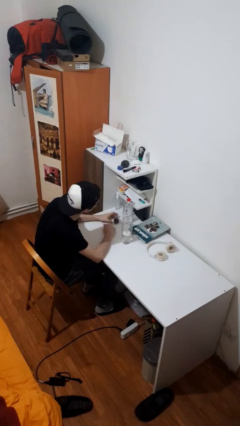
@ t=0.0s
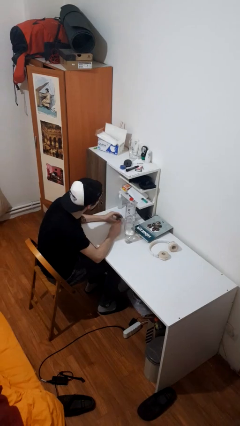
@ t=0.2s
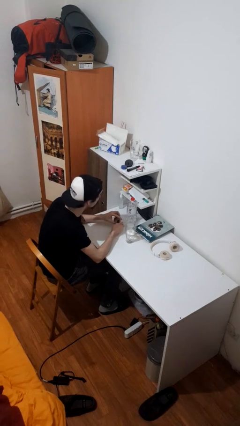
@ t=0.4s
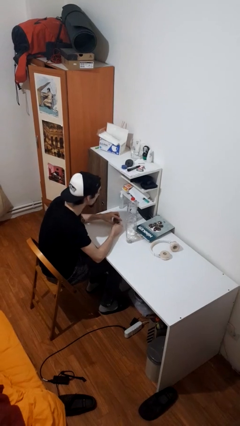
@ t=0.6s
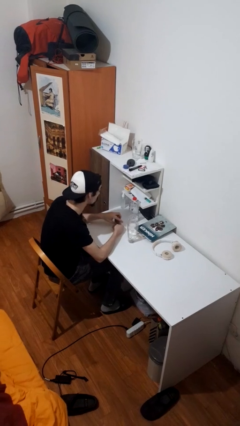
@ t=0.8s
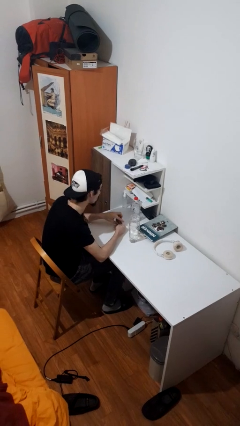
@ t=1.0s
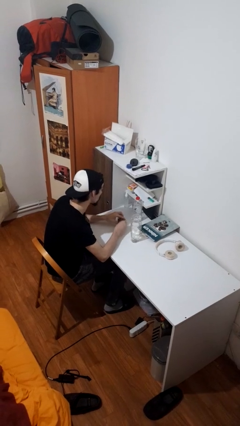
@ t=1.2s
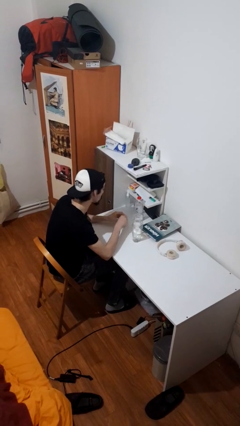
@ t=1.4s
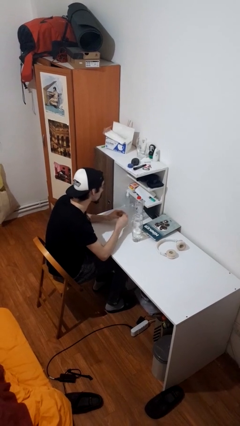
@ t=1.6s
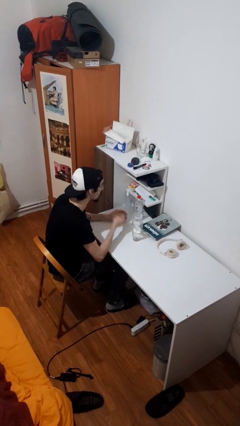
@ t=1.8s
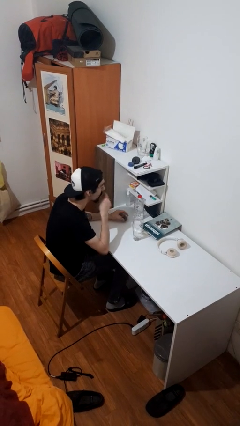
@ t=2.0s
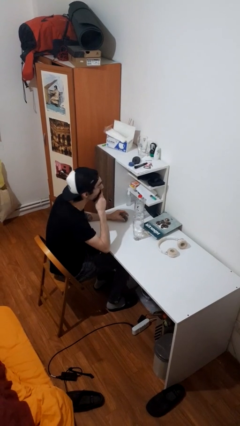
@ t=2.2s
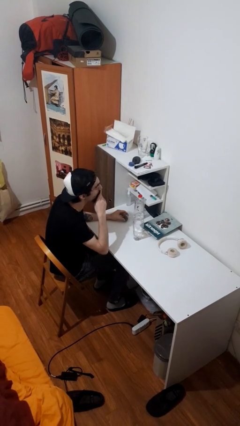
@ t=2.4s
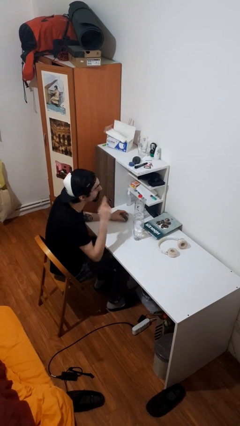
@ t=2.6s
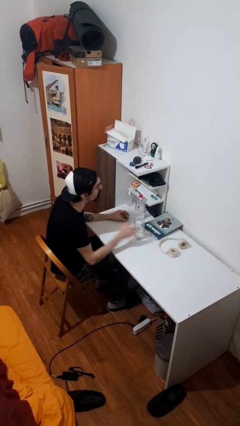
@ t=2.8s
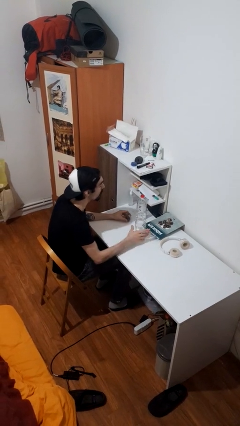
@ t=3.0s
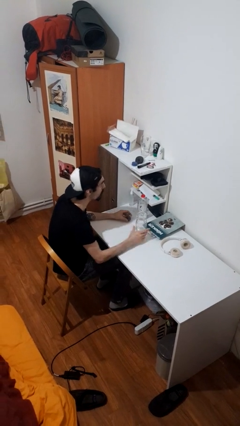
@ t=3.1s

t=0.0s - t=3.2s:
person takes medicine pills

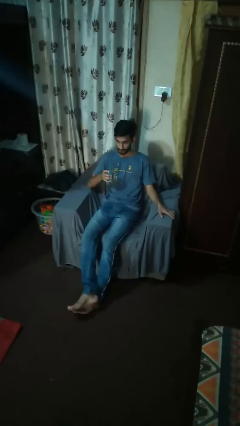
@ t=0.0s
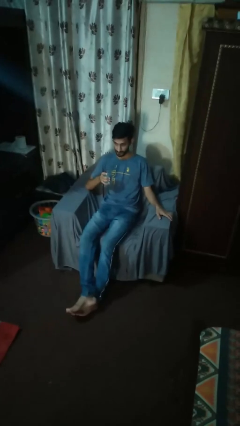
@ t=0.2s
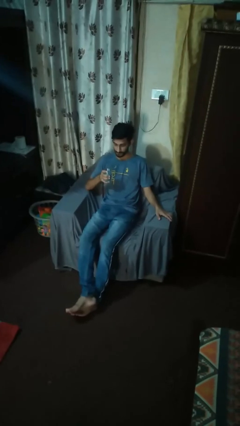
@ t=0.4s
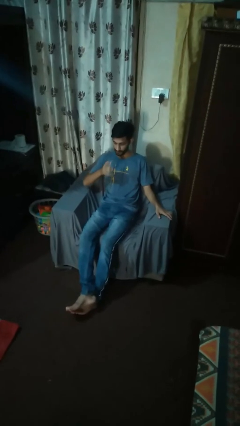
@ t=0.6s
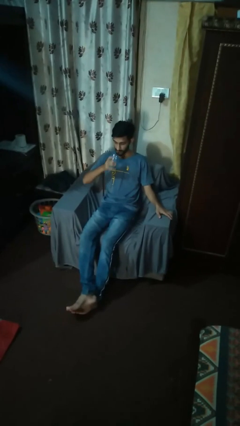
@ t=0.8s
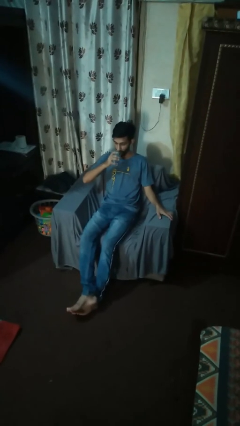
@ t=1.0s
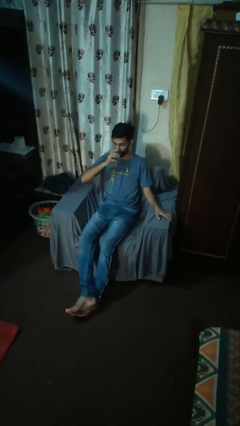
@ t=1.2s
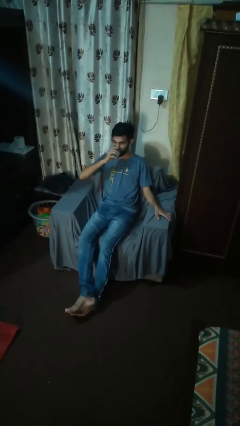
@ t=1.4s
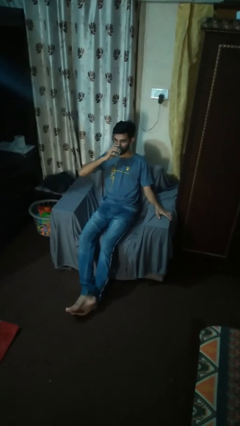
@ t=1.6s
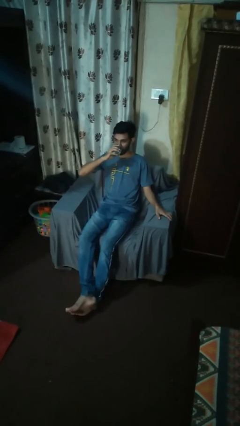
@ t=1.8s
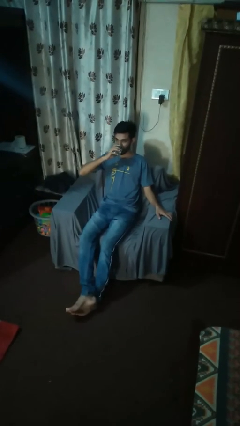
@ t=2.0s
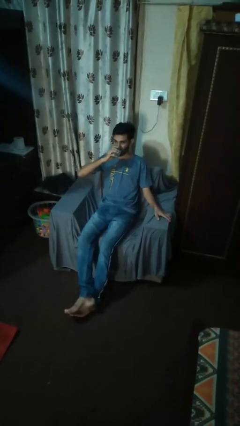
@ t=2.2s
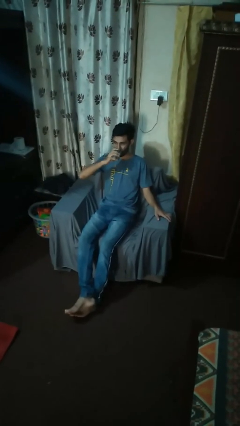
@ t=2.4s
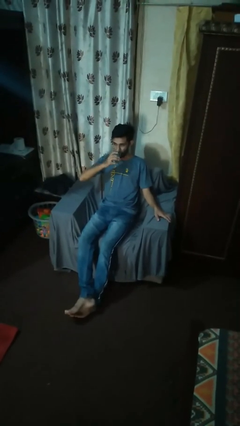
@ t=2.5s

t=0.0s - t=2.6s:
person drinks from shotglass

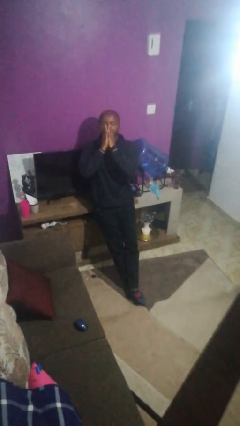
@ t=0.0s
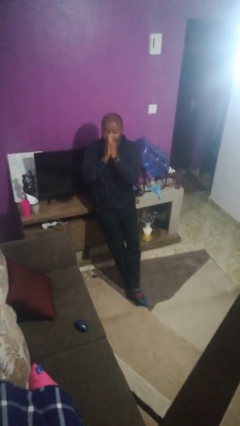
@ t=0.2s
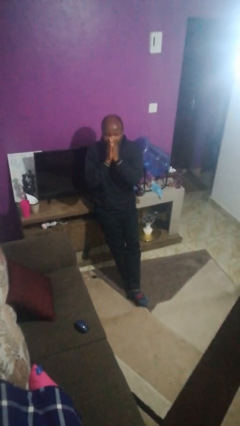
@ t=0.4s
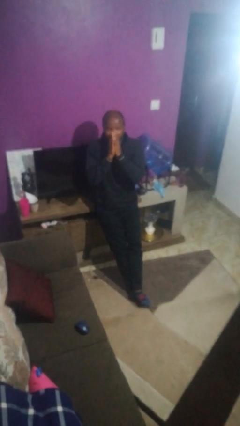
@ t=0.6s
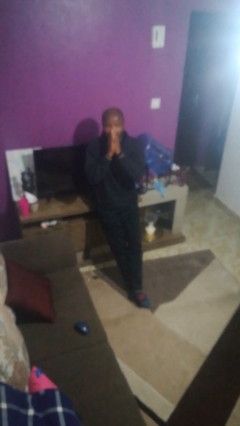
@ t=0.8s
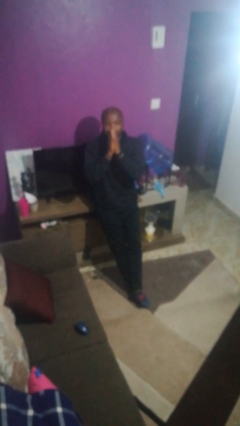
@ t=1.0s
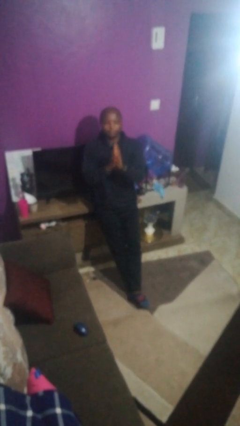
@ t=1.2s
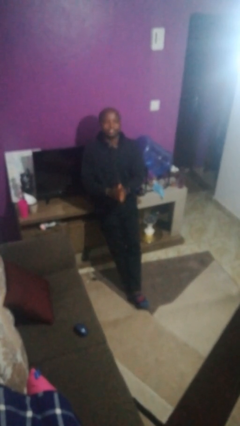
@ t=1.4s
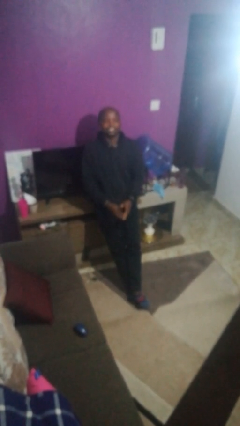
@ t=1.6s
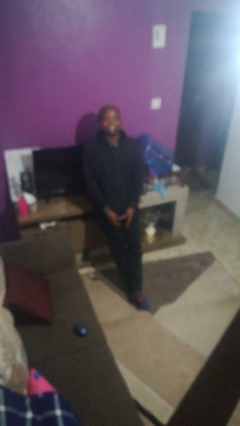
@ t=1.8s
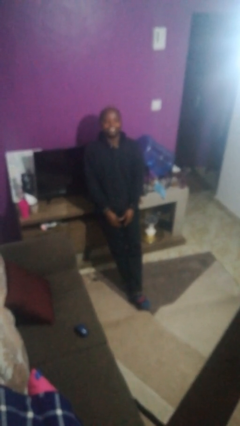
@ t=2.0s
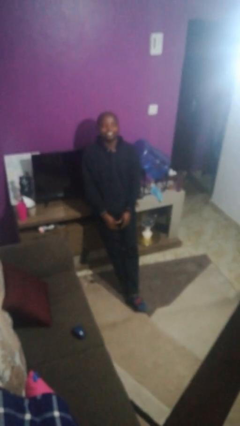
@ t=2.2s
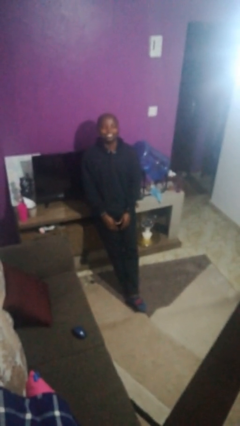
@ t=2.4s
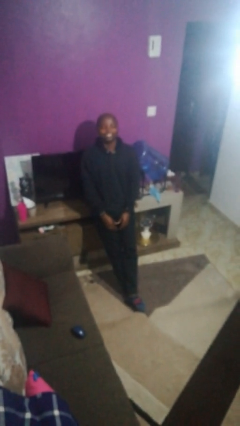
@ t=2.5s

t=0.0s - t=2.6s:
person sneezes into hand

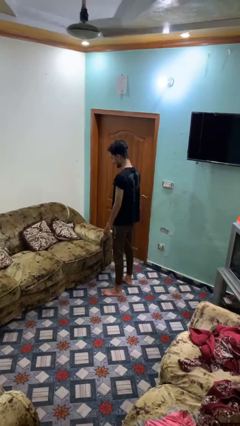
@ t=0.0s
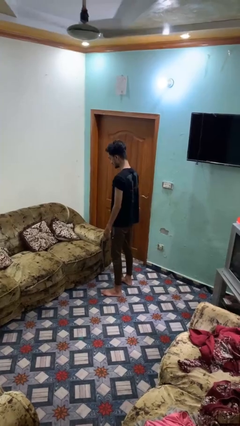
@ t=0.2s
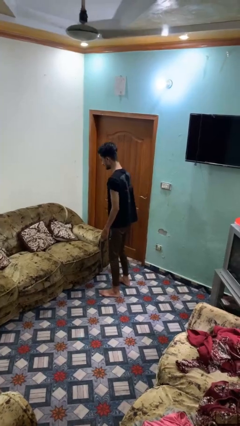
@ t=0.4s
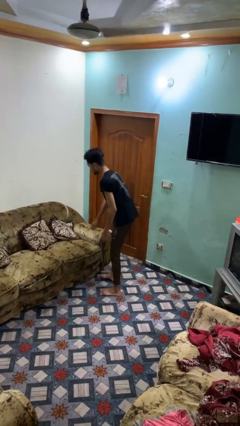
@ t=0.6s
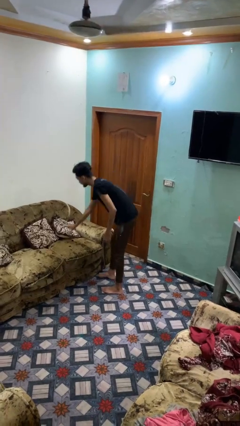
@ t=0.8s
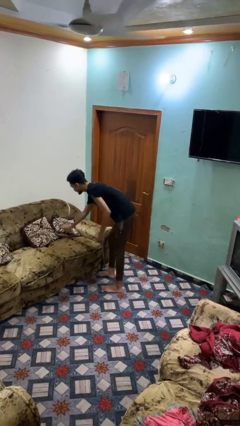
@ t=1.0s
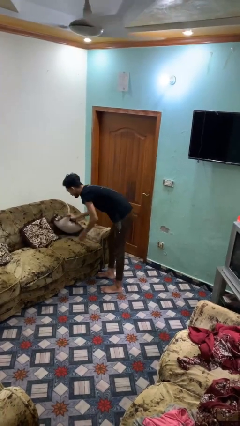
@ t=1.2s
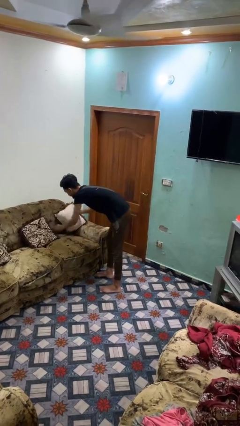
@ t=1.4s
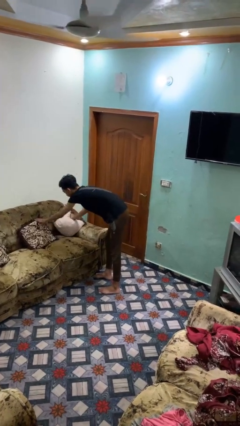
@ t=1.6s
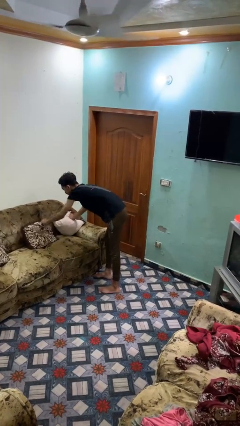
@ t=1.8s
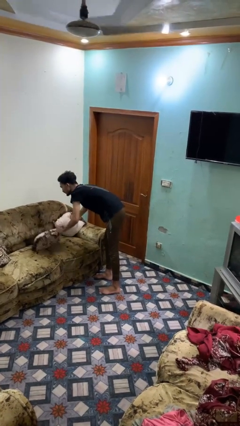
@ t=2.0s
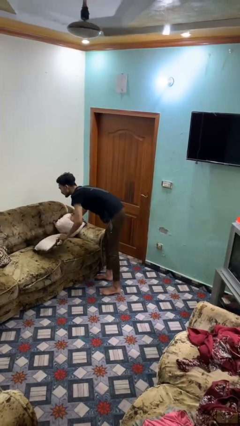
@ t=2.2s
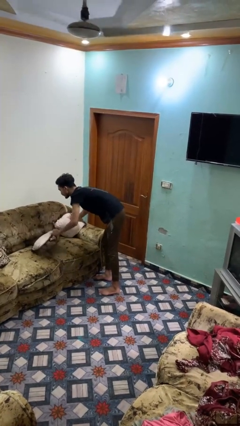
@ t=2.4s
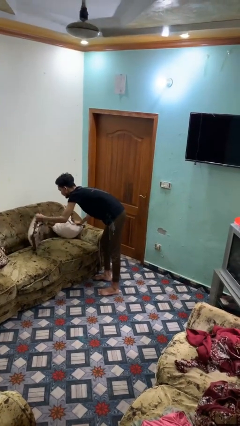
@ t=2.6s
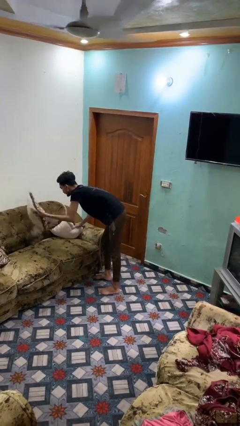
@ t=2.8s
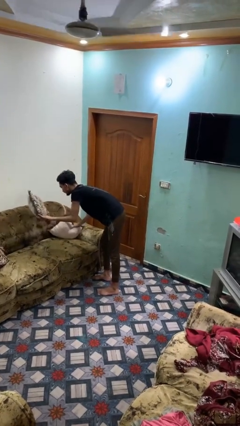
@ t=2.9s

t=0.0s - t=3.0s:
person searches under couch

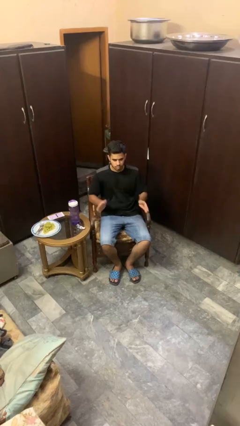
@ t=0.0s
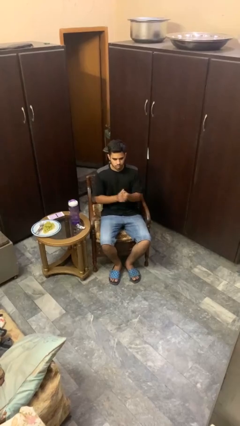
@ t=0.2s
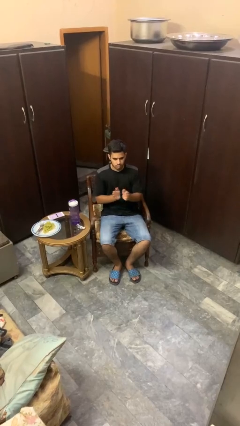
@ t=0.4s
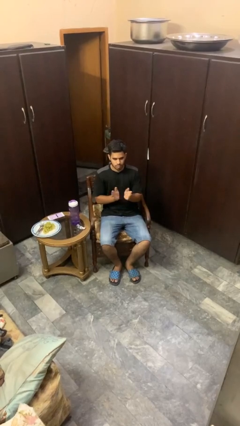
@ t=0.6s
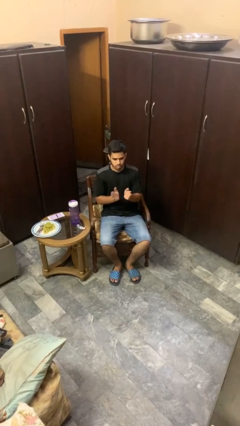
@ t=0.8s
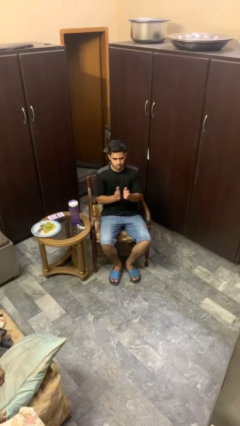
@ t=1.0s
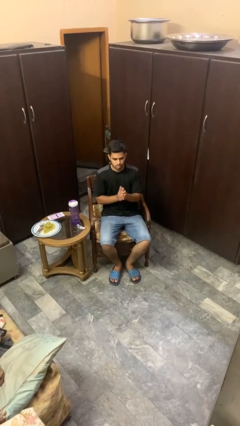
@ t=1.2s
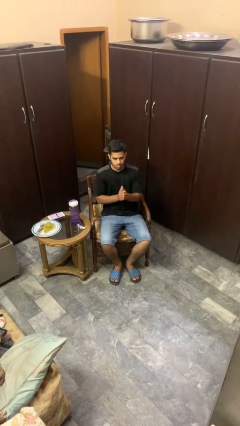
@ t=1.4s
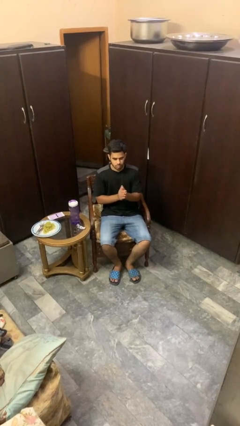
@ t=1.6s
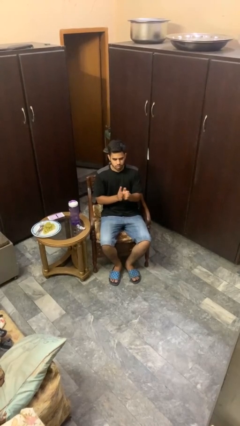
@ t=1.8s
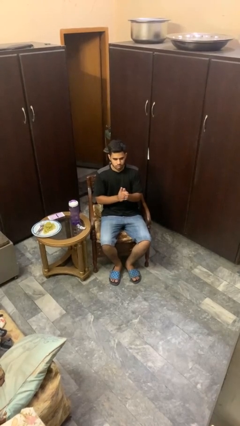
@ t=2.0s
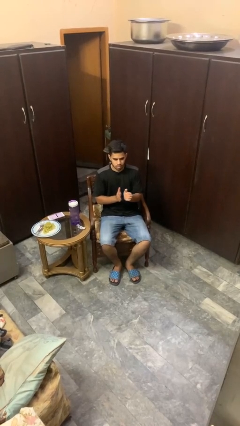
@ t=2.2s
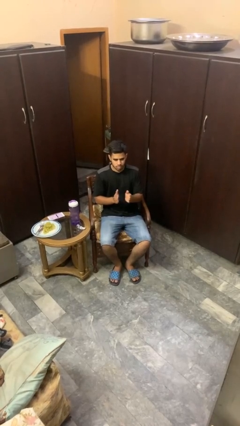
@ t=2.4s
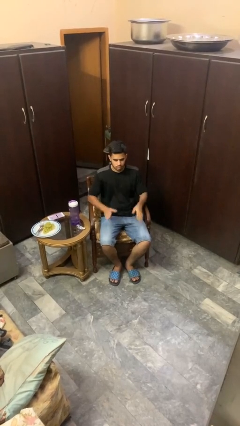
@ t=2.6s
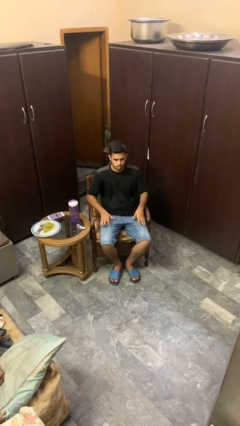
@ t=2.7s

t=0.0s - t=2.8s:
person claps hands

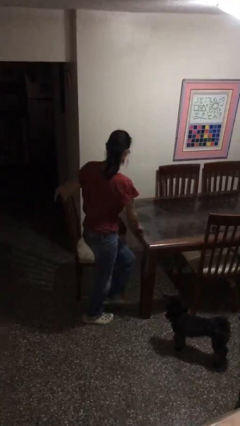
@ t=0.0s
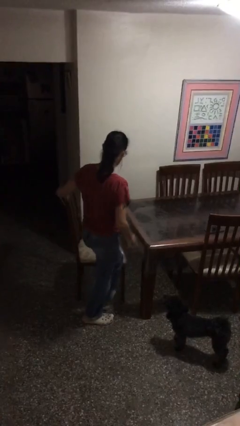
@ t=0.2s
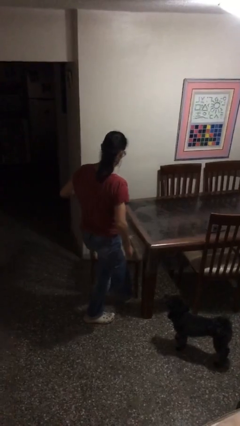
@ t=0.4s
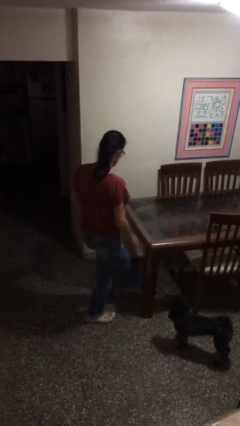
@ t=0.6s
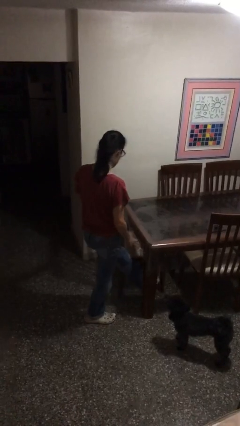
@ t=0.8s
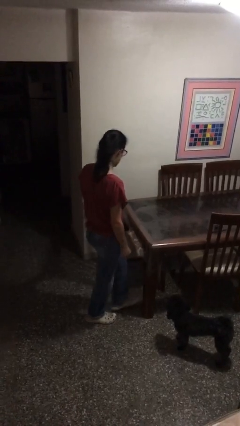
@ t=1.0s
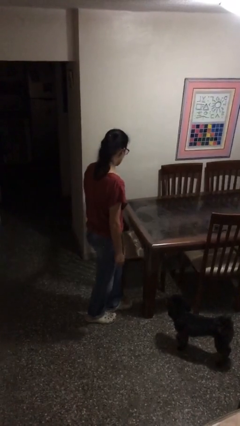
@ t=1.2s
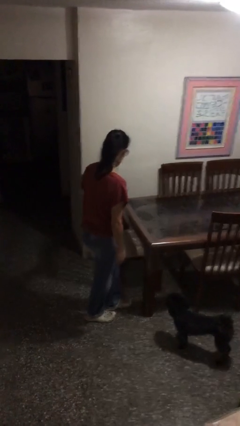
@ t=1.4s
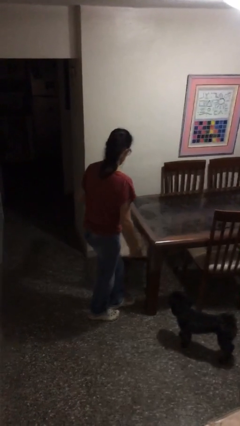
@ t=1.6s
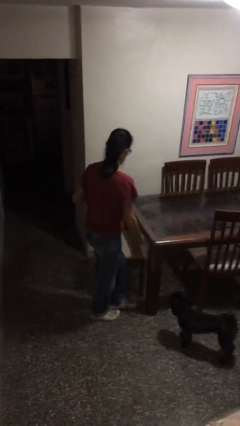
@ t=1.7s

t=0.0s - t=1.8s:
person stands up

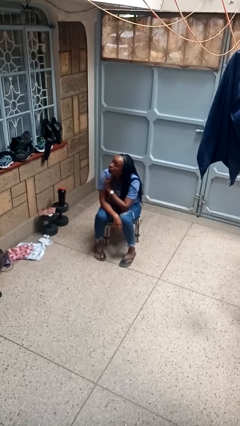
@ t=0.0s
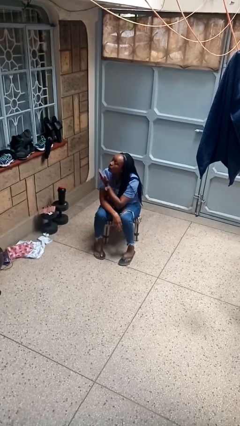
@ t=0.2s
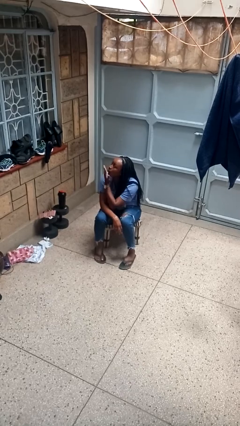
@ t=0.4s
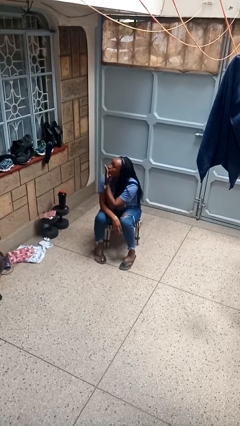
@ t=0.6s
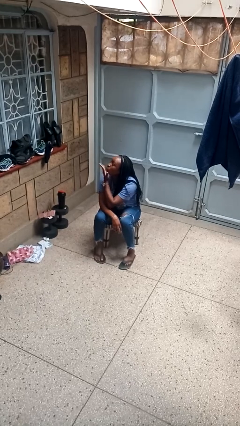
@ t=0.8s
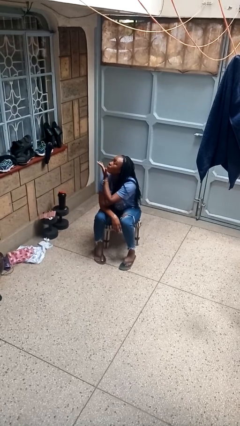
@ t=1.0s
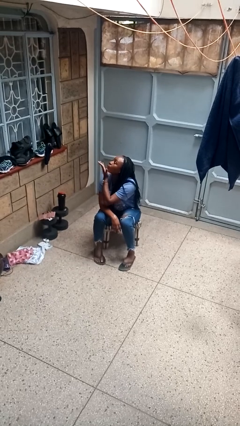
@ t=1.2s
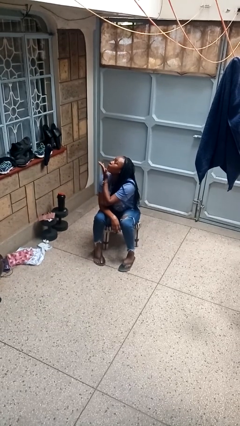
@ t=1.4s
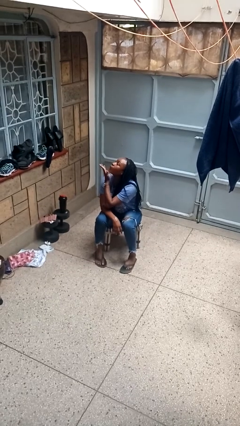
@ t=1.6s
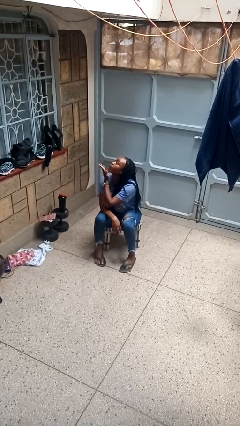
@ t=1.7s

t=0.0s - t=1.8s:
person gestures blow kiss
